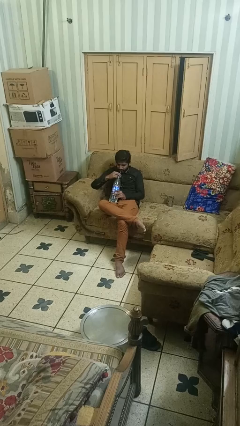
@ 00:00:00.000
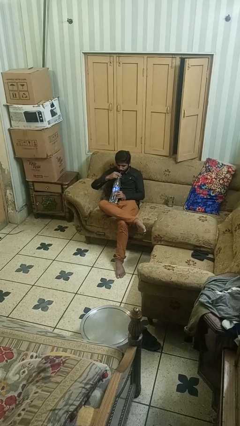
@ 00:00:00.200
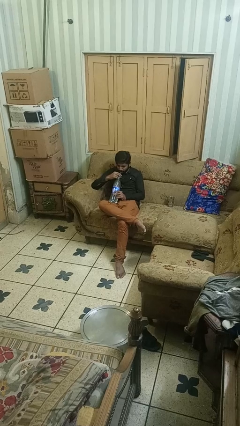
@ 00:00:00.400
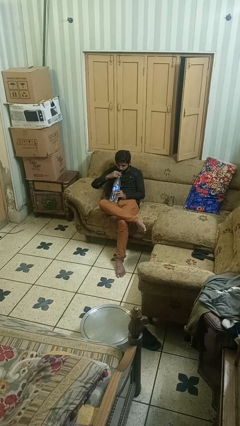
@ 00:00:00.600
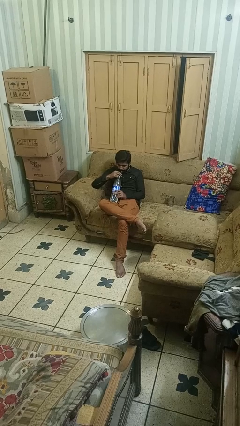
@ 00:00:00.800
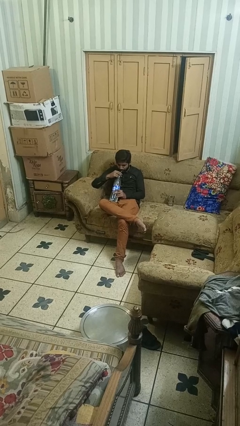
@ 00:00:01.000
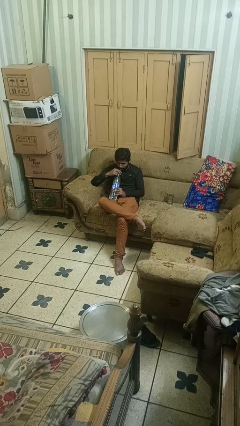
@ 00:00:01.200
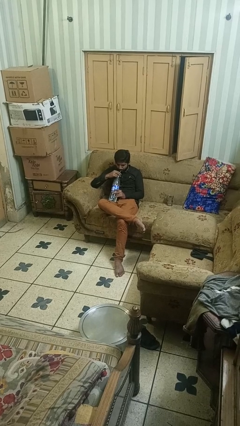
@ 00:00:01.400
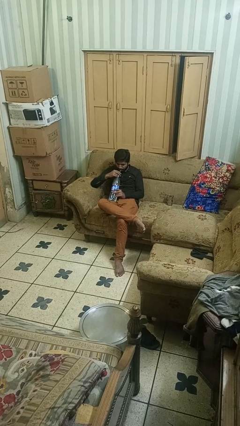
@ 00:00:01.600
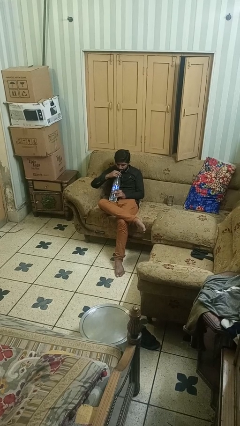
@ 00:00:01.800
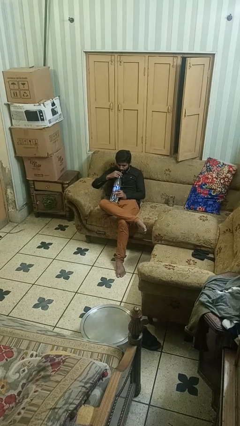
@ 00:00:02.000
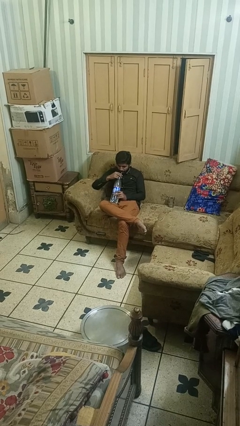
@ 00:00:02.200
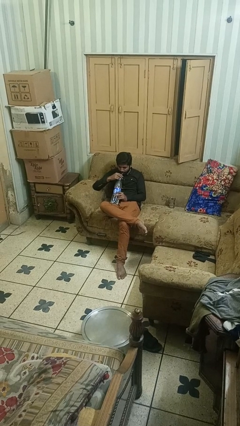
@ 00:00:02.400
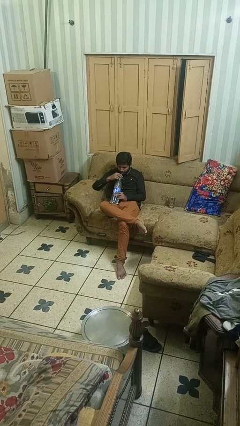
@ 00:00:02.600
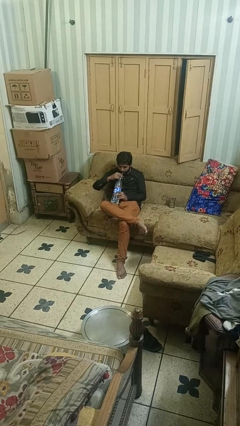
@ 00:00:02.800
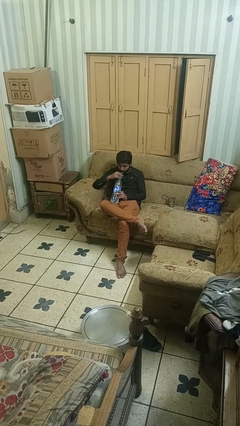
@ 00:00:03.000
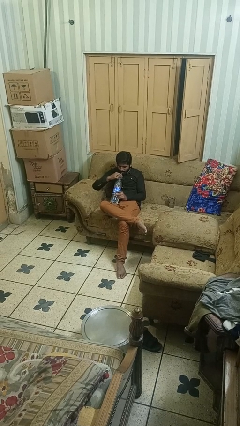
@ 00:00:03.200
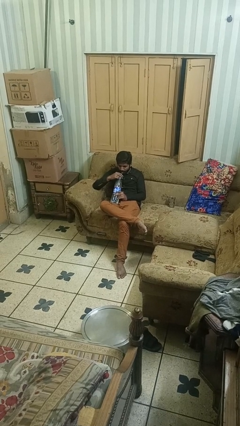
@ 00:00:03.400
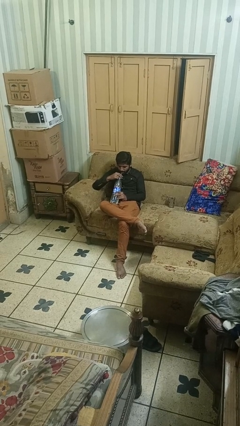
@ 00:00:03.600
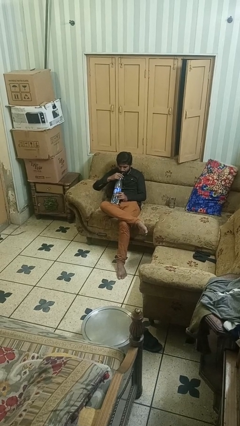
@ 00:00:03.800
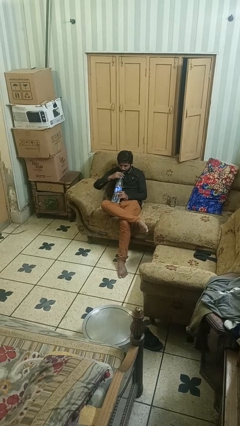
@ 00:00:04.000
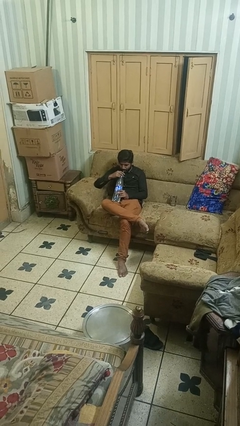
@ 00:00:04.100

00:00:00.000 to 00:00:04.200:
person drinks from straw

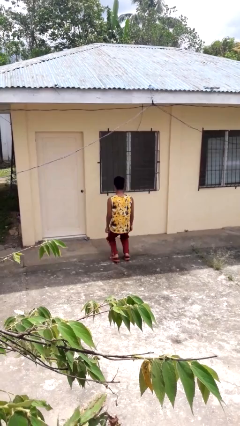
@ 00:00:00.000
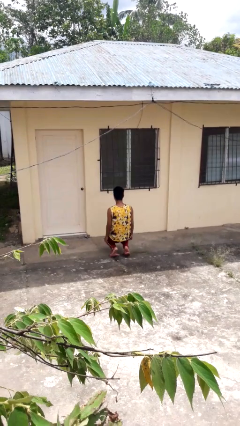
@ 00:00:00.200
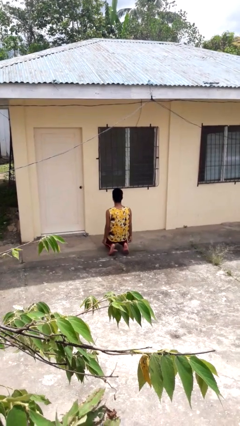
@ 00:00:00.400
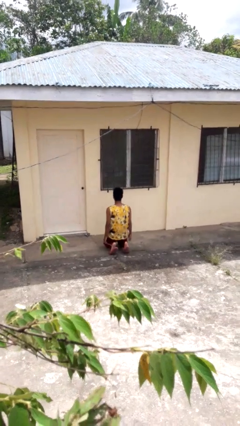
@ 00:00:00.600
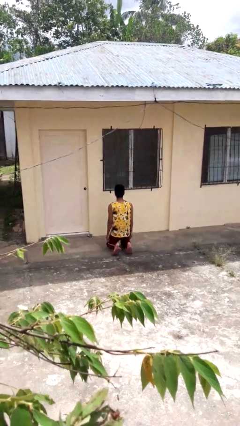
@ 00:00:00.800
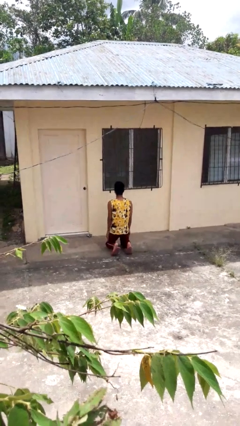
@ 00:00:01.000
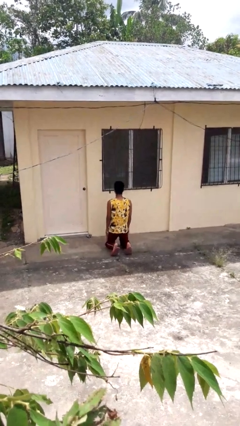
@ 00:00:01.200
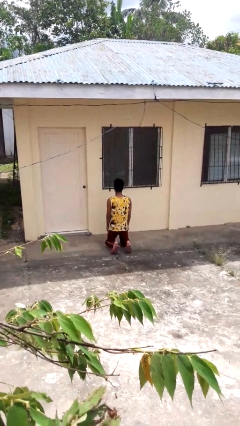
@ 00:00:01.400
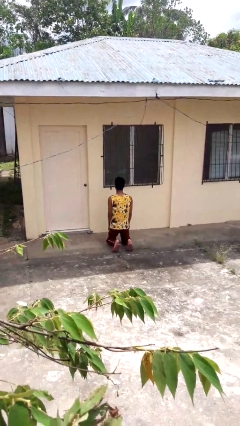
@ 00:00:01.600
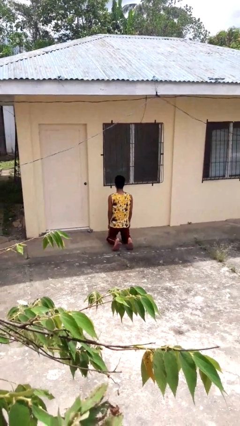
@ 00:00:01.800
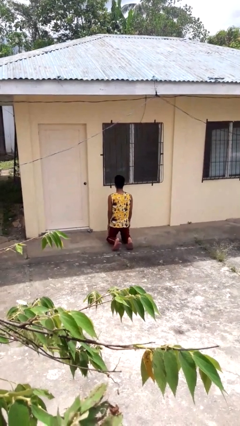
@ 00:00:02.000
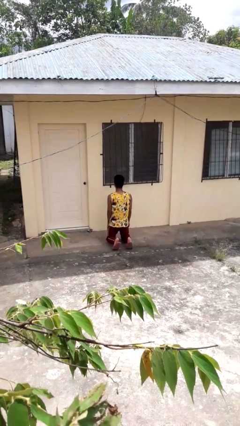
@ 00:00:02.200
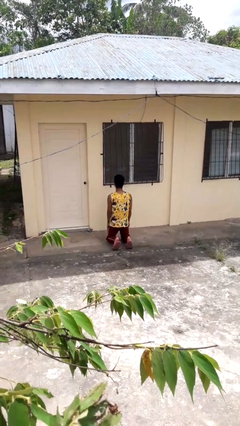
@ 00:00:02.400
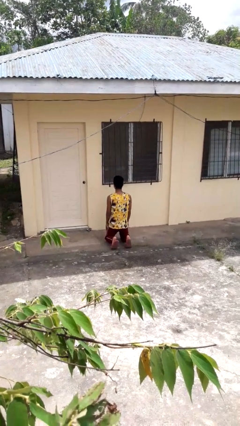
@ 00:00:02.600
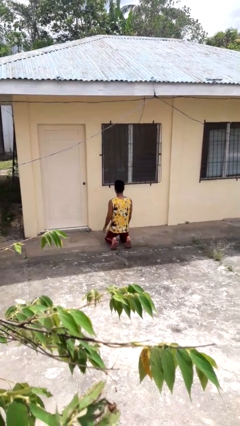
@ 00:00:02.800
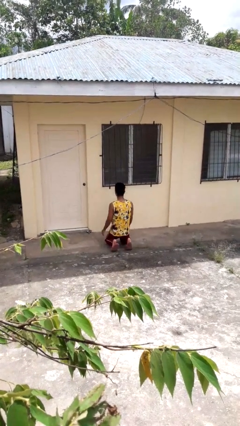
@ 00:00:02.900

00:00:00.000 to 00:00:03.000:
person kneels

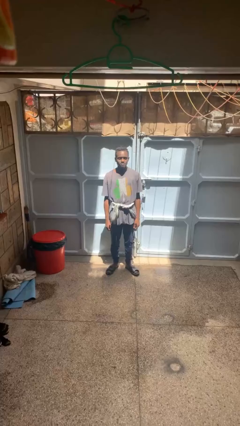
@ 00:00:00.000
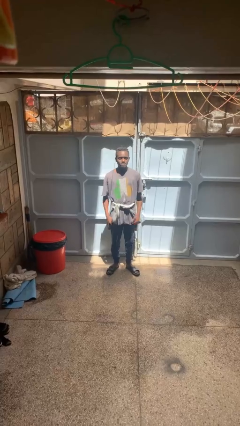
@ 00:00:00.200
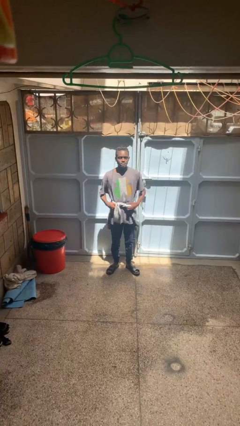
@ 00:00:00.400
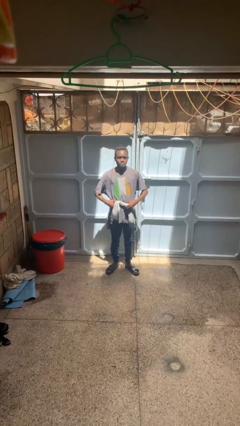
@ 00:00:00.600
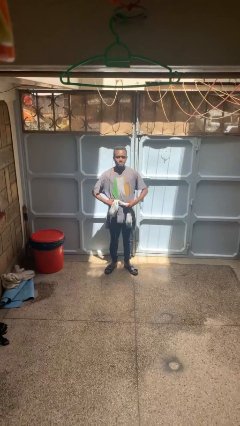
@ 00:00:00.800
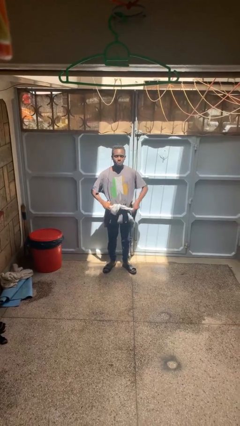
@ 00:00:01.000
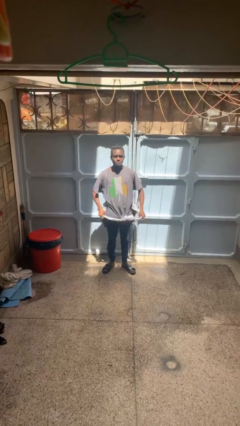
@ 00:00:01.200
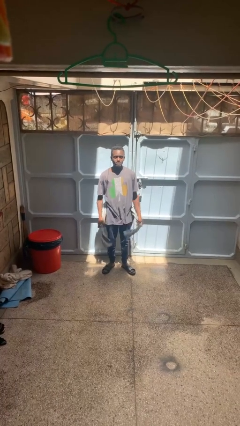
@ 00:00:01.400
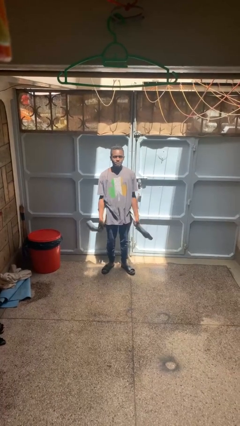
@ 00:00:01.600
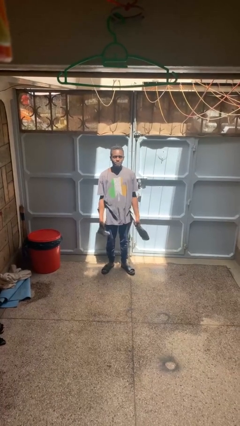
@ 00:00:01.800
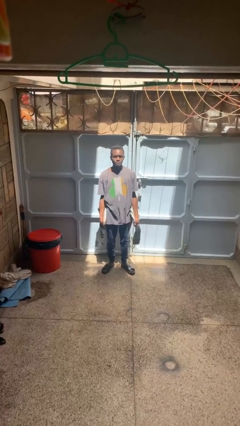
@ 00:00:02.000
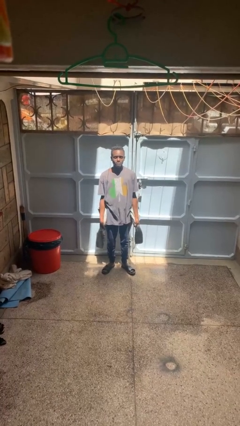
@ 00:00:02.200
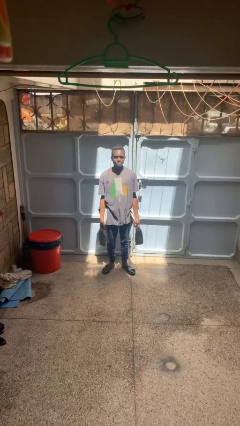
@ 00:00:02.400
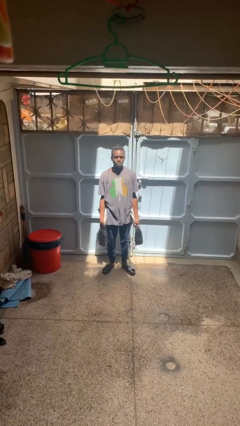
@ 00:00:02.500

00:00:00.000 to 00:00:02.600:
person unties jacket around waist

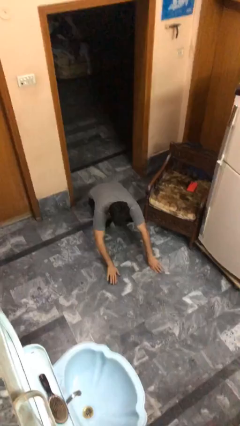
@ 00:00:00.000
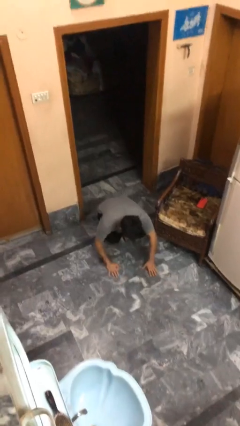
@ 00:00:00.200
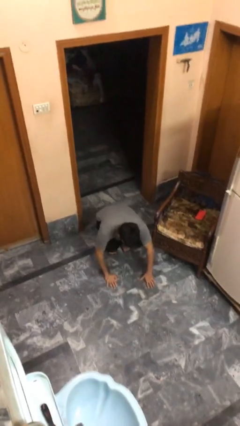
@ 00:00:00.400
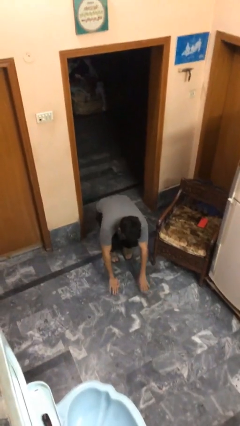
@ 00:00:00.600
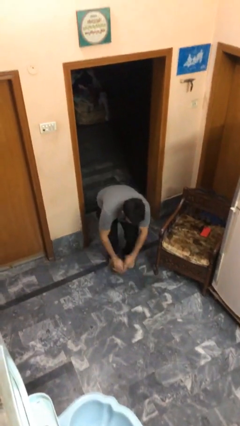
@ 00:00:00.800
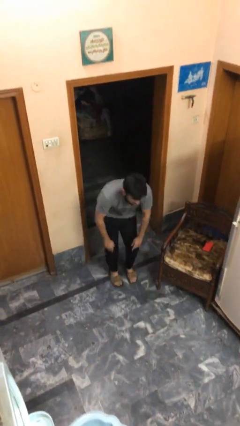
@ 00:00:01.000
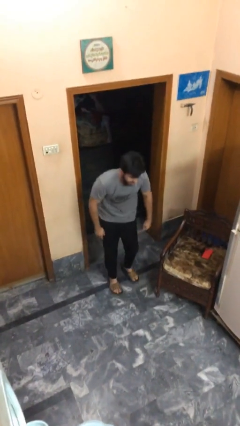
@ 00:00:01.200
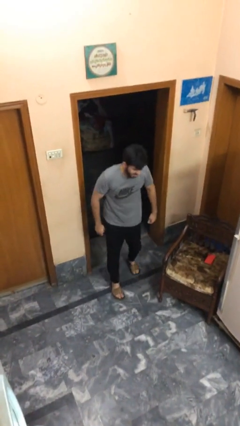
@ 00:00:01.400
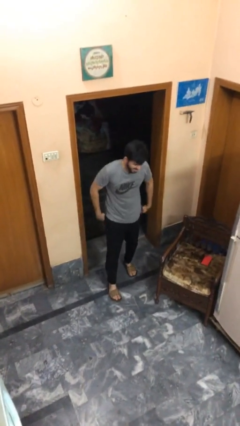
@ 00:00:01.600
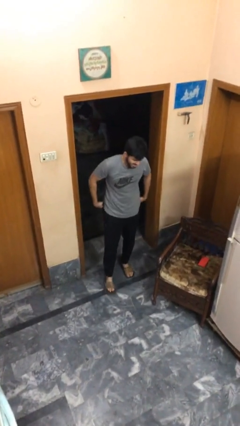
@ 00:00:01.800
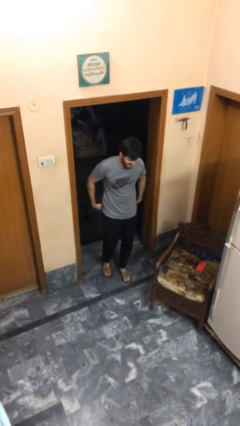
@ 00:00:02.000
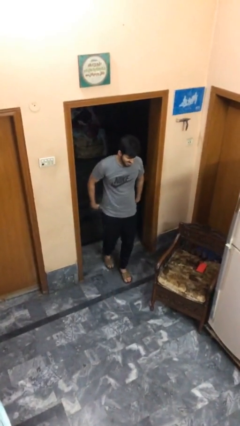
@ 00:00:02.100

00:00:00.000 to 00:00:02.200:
person stands up from floor

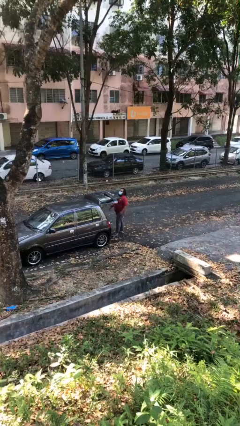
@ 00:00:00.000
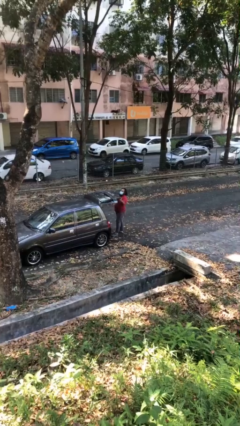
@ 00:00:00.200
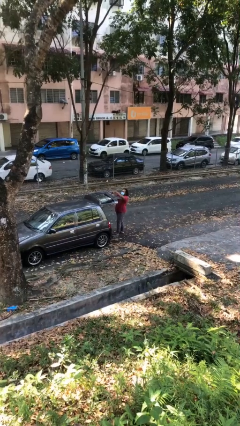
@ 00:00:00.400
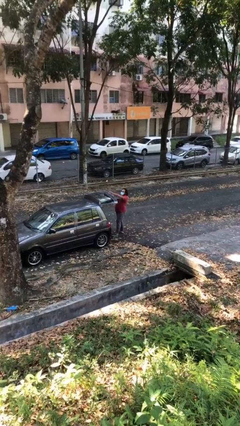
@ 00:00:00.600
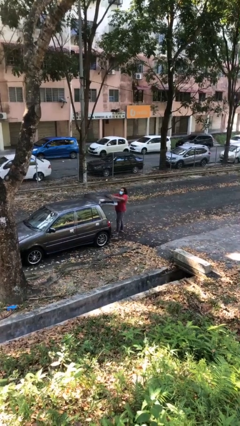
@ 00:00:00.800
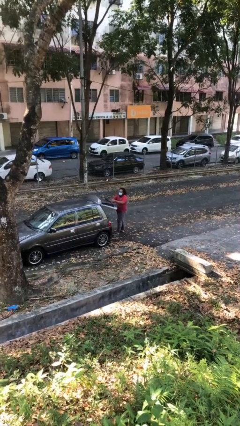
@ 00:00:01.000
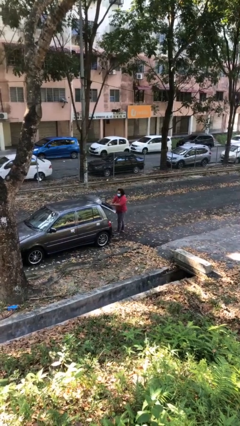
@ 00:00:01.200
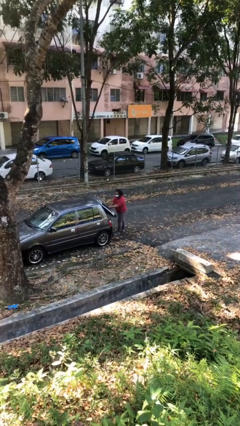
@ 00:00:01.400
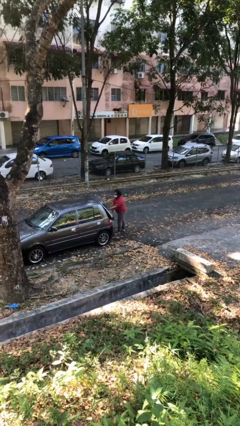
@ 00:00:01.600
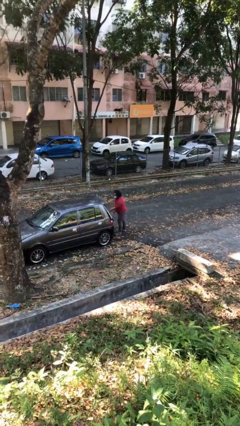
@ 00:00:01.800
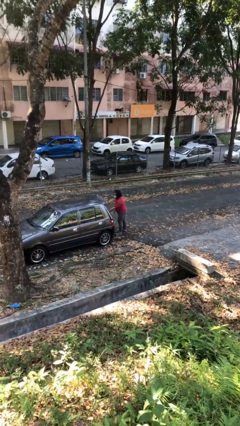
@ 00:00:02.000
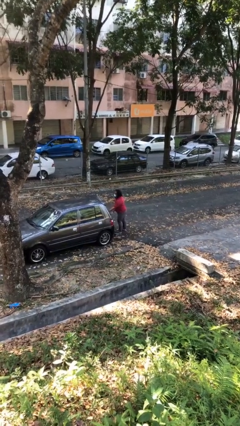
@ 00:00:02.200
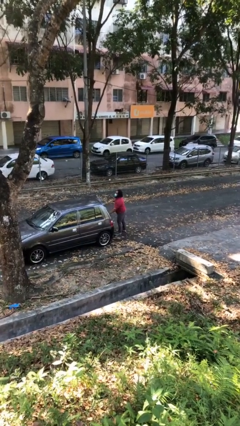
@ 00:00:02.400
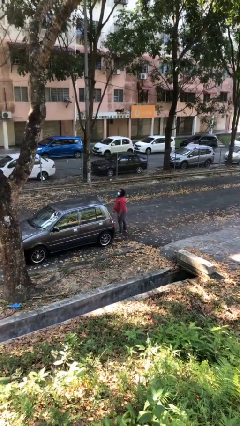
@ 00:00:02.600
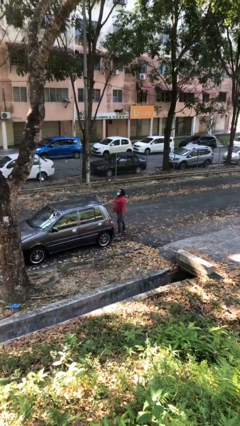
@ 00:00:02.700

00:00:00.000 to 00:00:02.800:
person closes car trunk

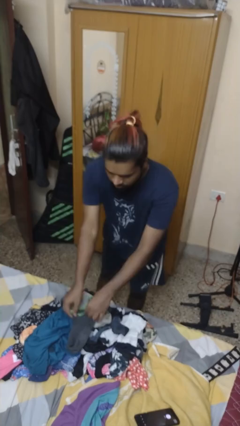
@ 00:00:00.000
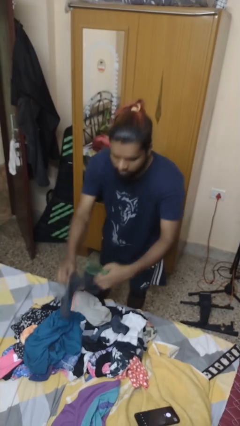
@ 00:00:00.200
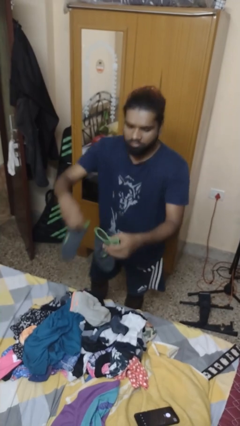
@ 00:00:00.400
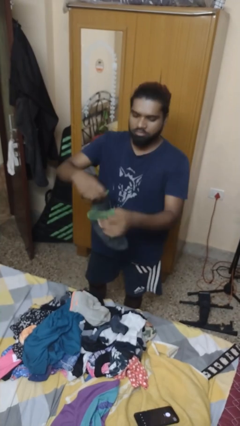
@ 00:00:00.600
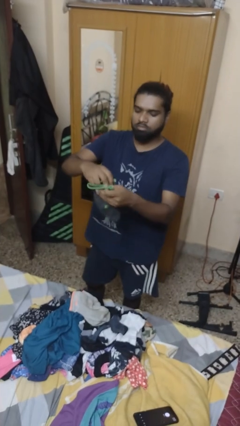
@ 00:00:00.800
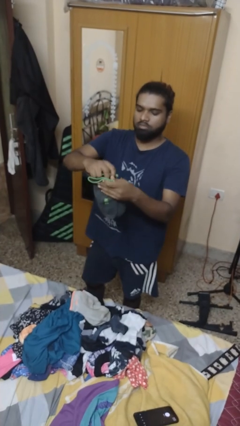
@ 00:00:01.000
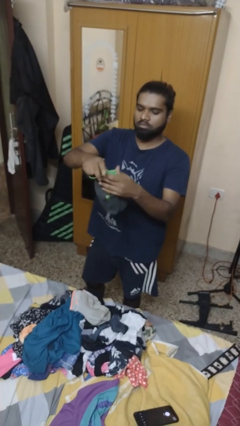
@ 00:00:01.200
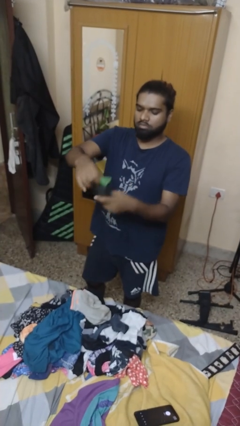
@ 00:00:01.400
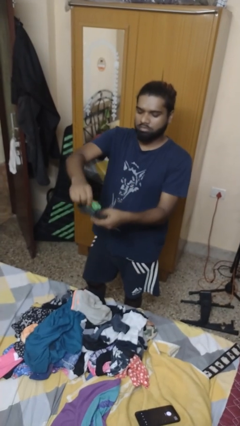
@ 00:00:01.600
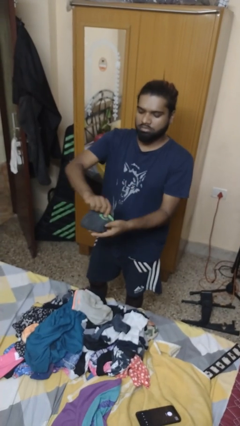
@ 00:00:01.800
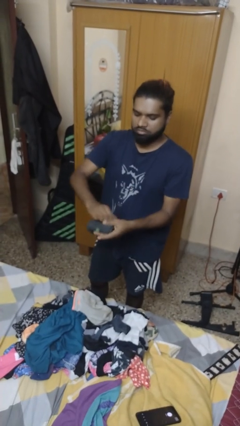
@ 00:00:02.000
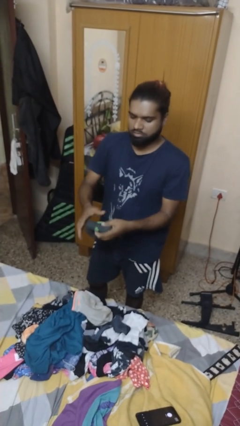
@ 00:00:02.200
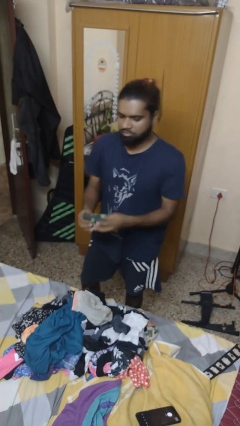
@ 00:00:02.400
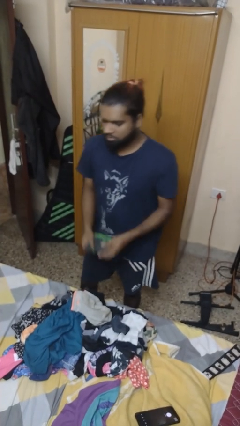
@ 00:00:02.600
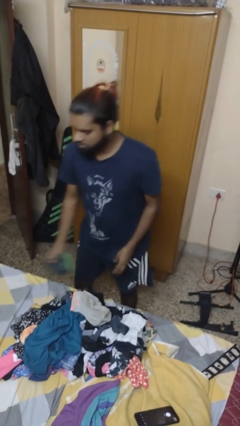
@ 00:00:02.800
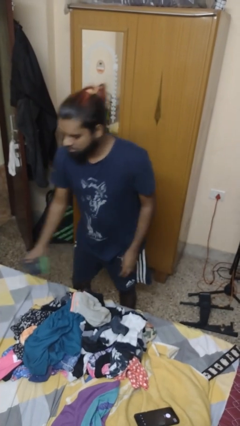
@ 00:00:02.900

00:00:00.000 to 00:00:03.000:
person folds socks
